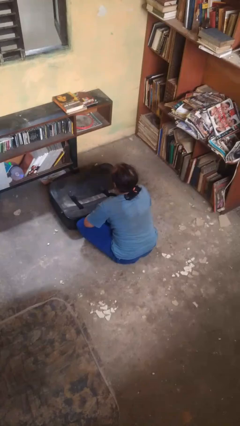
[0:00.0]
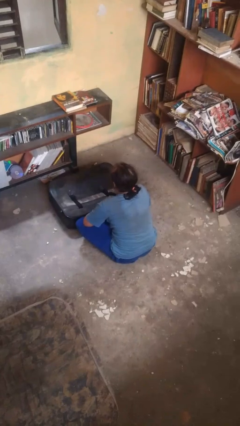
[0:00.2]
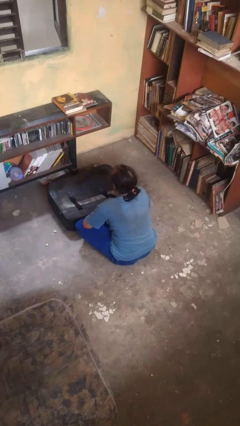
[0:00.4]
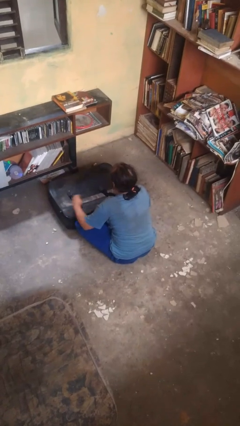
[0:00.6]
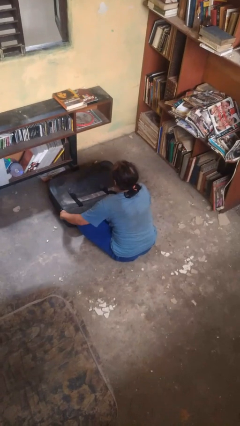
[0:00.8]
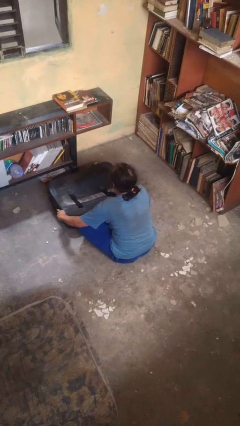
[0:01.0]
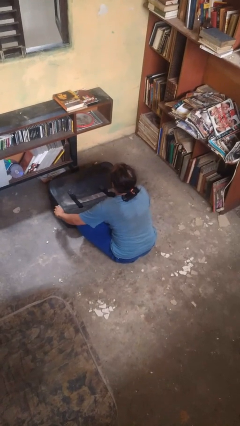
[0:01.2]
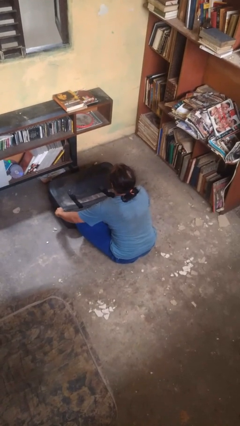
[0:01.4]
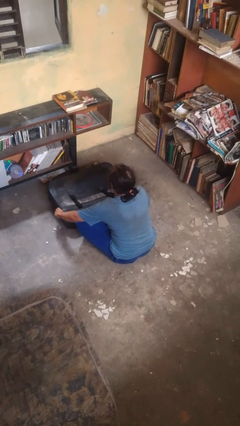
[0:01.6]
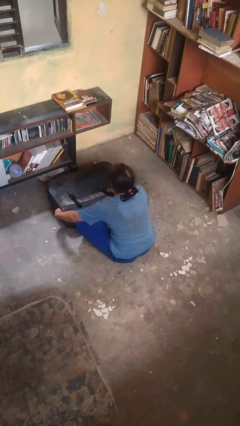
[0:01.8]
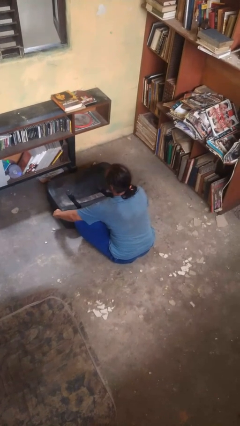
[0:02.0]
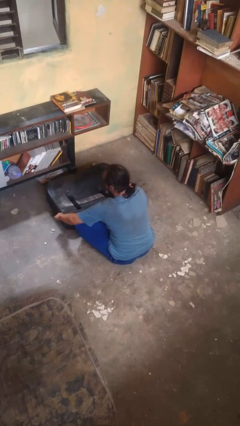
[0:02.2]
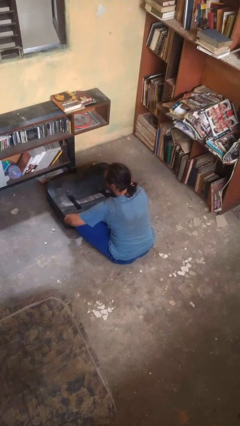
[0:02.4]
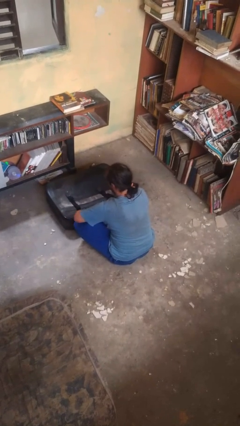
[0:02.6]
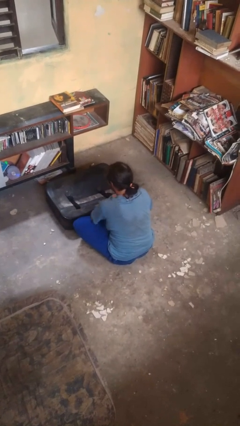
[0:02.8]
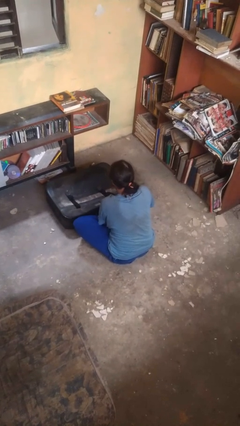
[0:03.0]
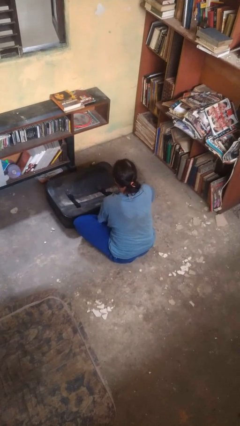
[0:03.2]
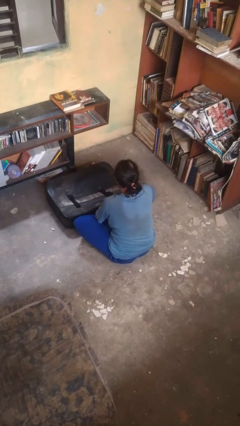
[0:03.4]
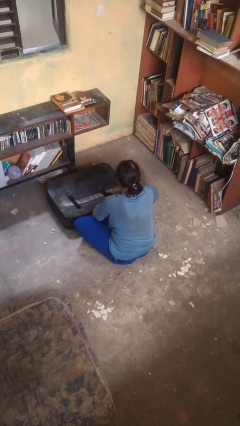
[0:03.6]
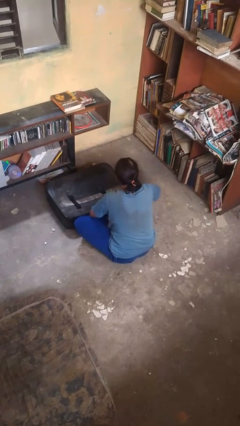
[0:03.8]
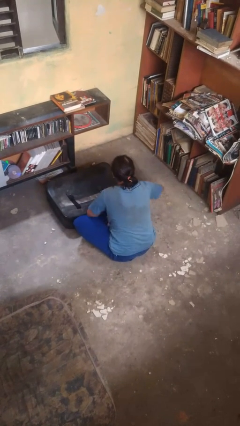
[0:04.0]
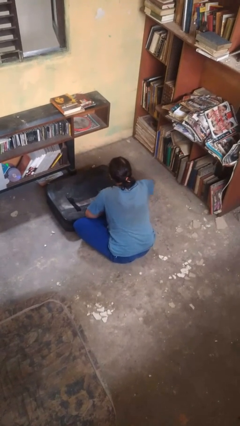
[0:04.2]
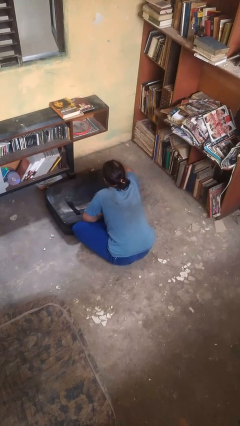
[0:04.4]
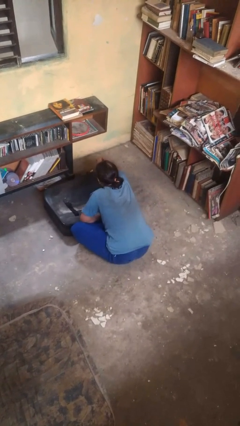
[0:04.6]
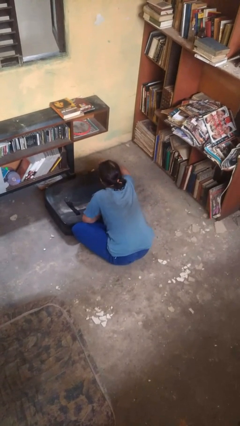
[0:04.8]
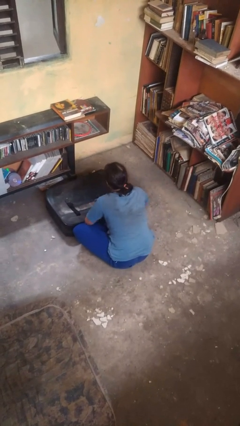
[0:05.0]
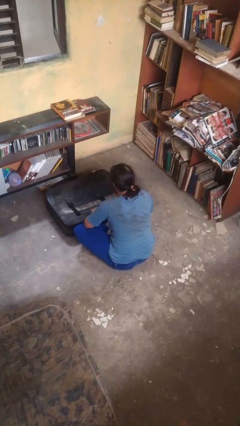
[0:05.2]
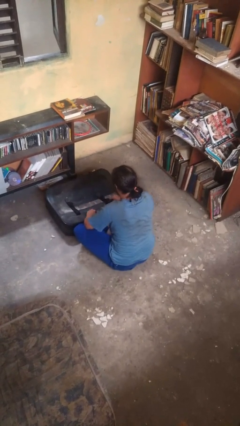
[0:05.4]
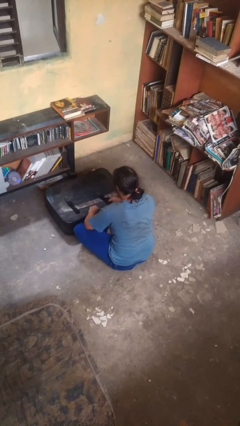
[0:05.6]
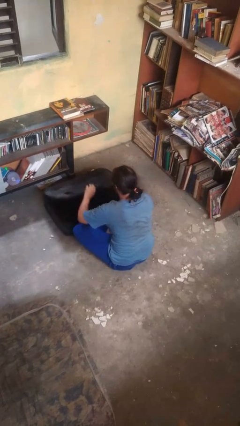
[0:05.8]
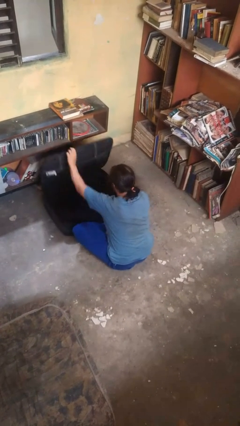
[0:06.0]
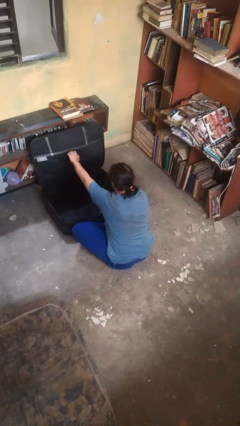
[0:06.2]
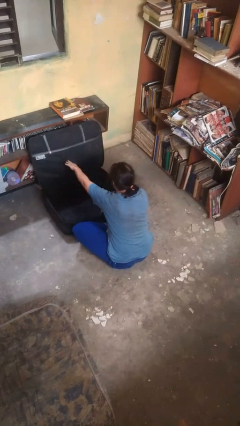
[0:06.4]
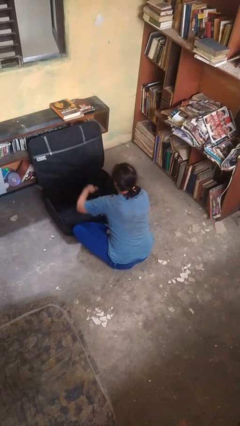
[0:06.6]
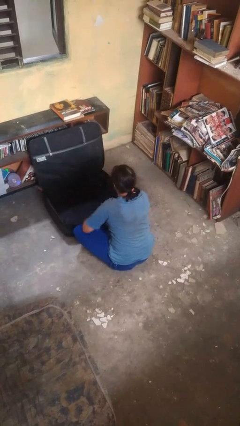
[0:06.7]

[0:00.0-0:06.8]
person opens suitcase

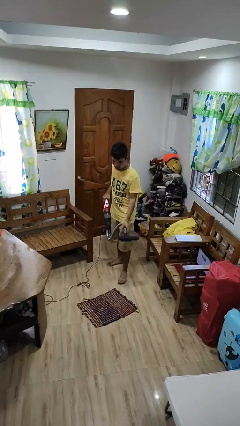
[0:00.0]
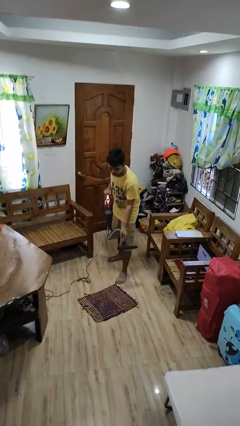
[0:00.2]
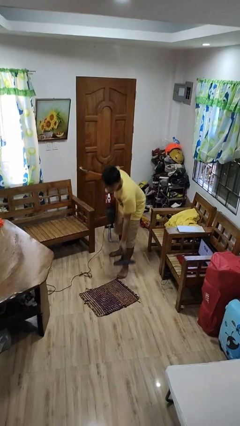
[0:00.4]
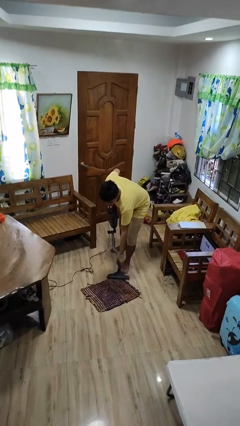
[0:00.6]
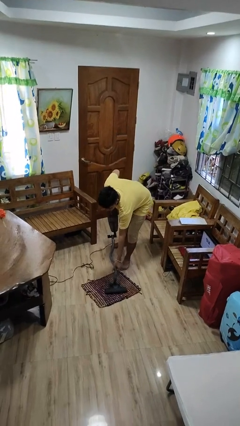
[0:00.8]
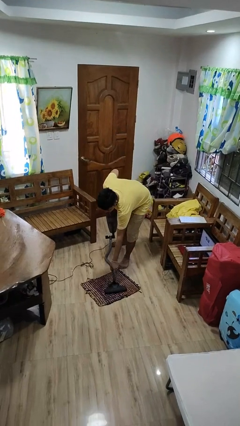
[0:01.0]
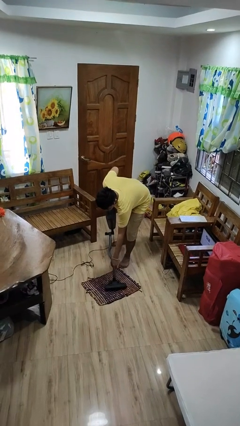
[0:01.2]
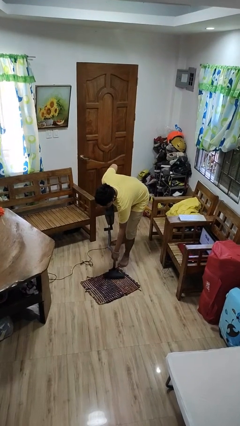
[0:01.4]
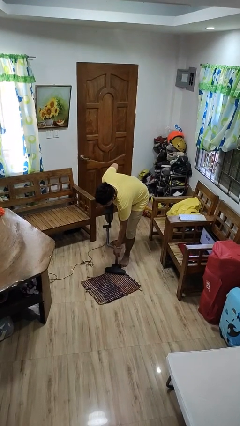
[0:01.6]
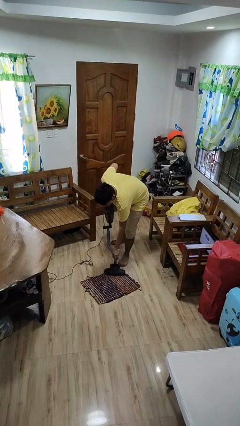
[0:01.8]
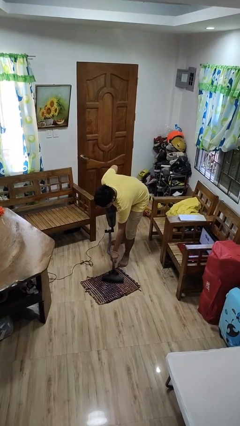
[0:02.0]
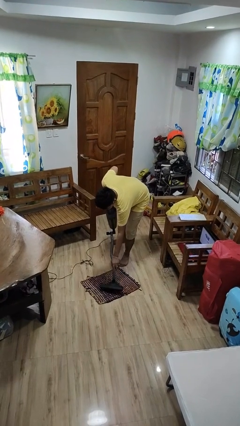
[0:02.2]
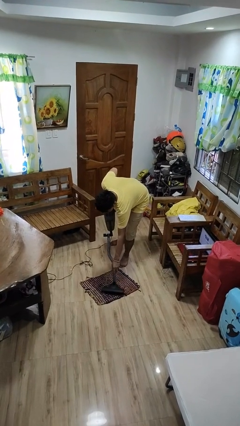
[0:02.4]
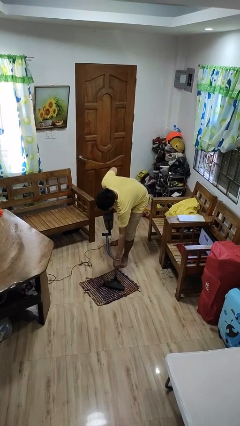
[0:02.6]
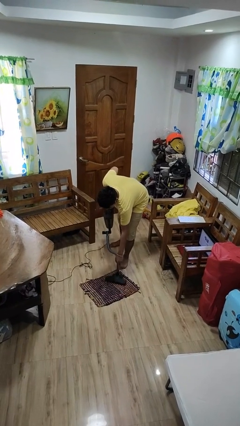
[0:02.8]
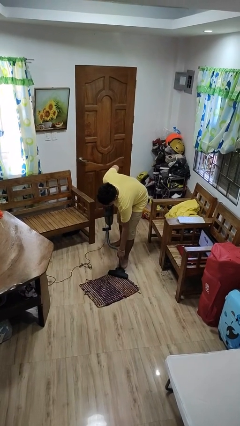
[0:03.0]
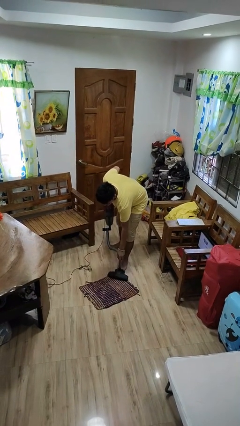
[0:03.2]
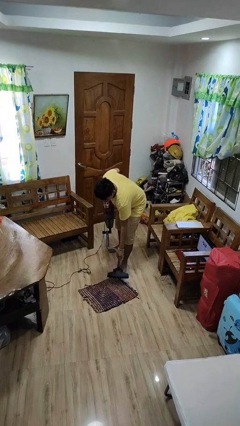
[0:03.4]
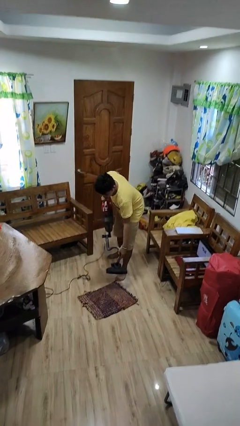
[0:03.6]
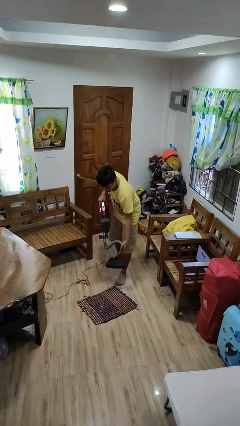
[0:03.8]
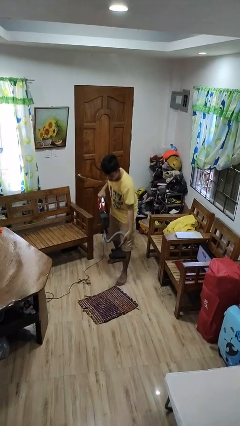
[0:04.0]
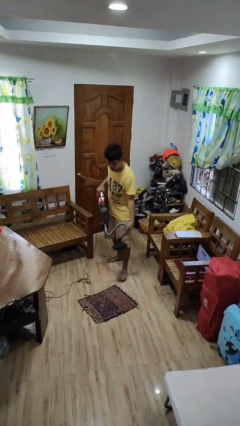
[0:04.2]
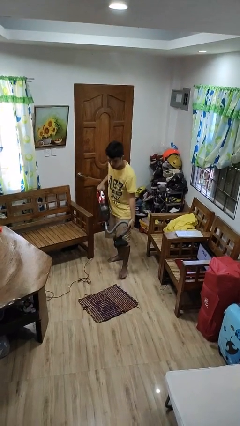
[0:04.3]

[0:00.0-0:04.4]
person vacuums carpet

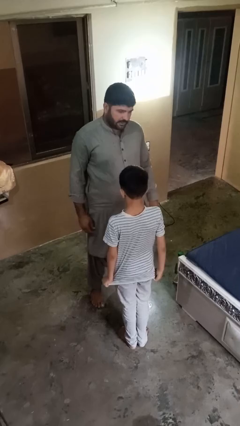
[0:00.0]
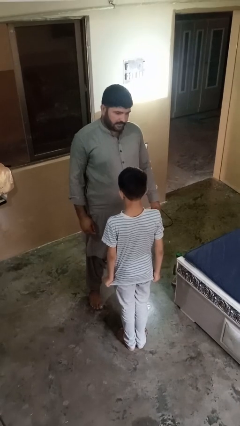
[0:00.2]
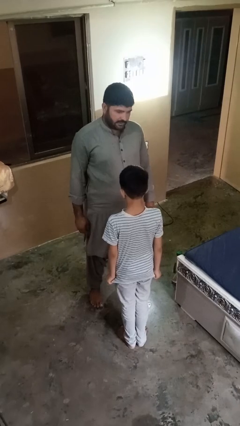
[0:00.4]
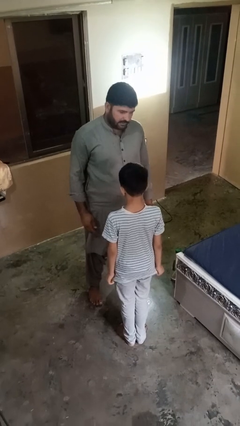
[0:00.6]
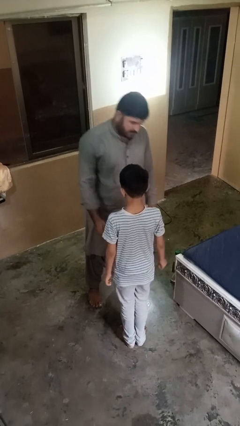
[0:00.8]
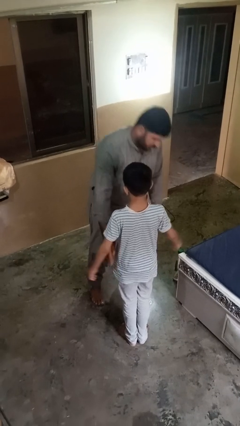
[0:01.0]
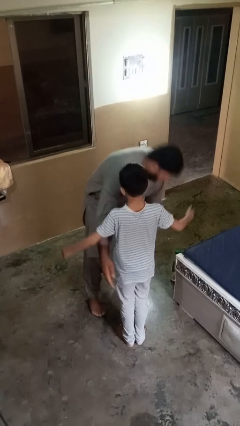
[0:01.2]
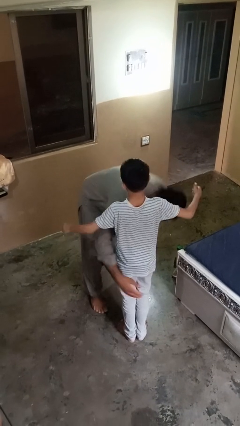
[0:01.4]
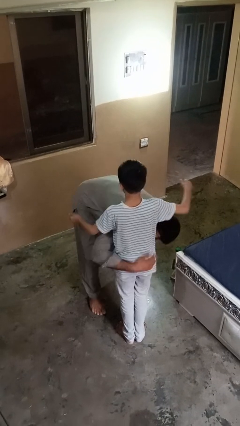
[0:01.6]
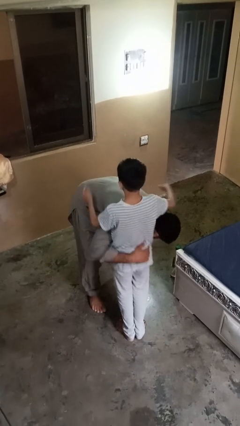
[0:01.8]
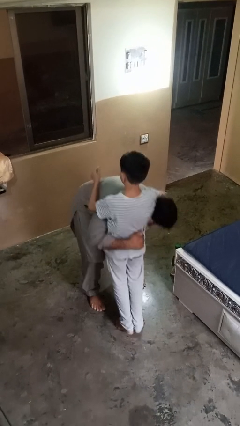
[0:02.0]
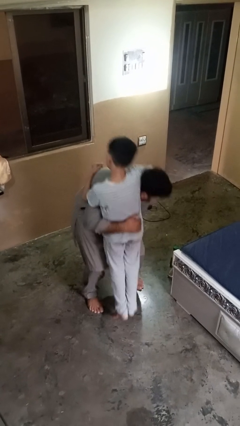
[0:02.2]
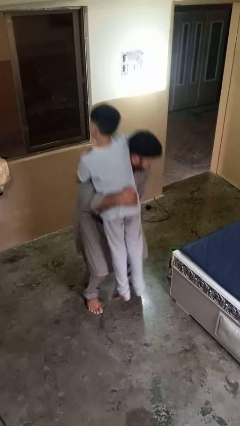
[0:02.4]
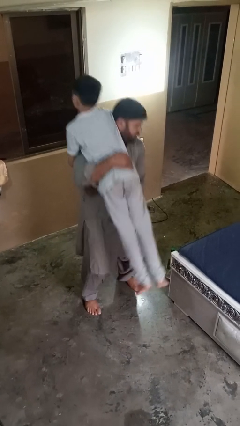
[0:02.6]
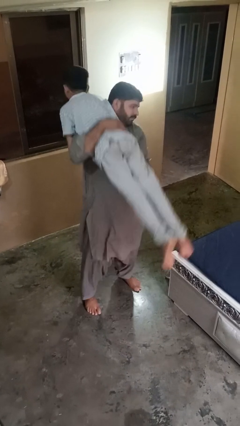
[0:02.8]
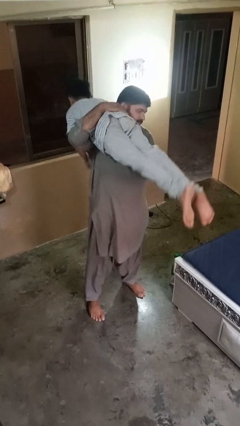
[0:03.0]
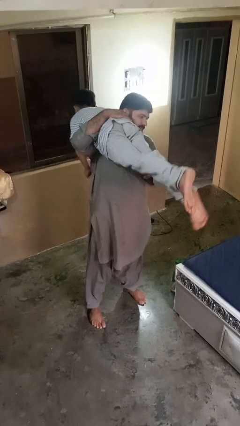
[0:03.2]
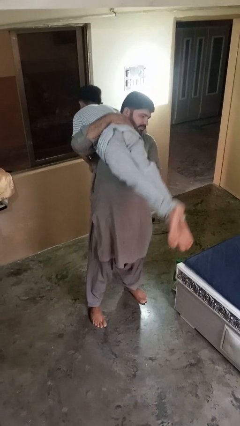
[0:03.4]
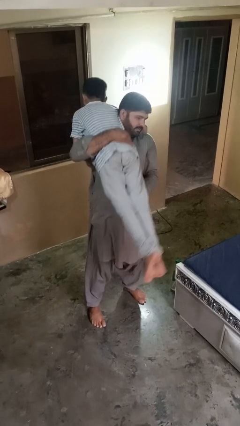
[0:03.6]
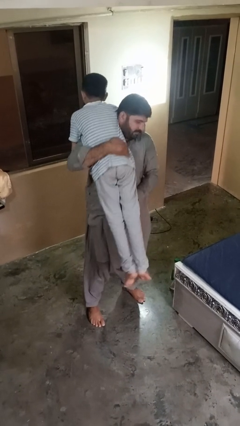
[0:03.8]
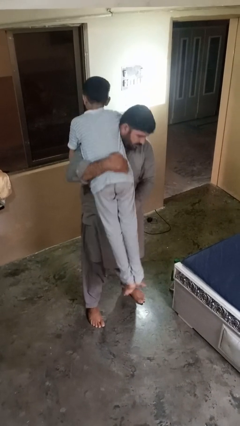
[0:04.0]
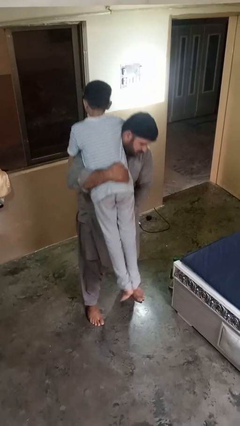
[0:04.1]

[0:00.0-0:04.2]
person carries person on shoulders

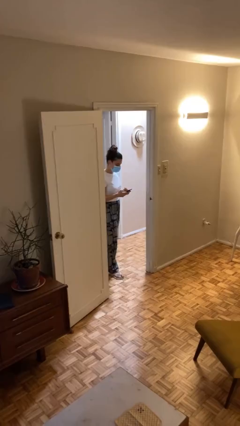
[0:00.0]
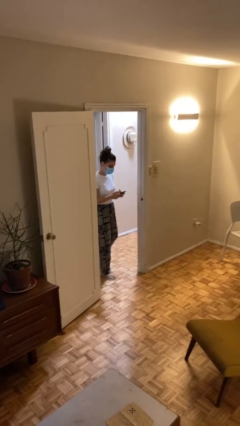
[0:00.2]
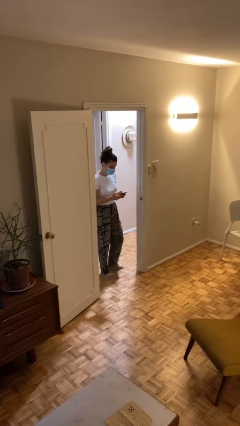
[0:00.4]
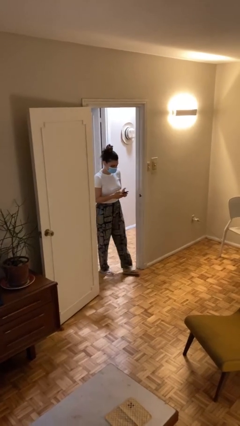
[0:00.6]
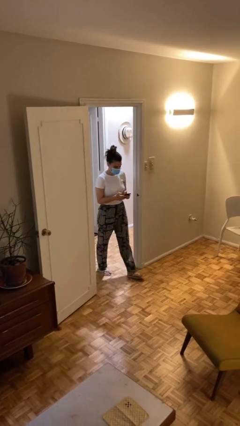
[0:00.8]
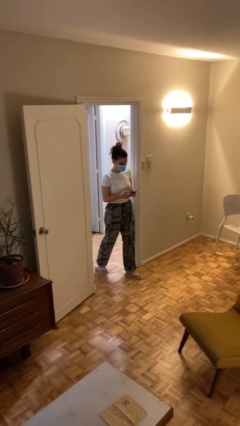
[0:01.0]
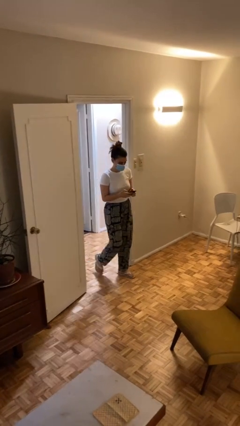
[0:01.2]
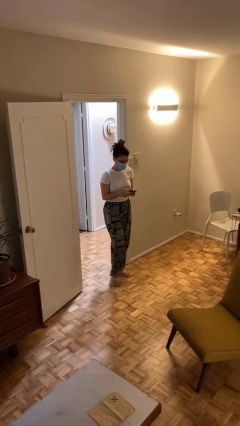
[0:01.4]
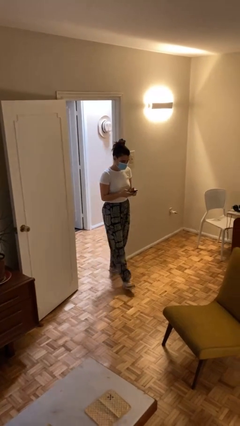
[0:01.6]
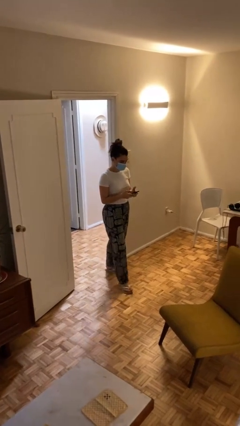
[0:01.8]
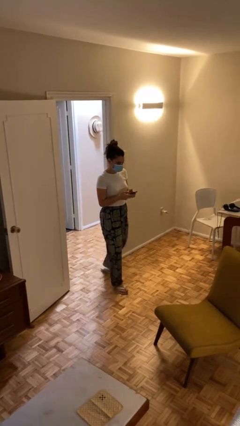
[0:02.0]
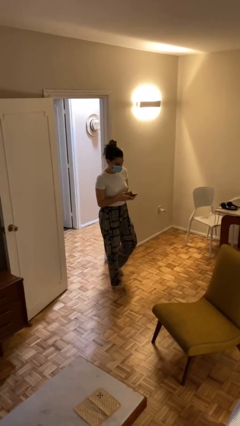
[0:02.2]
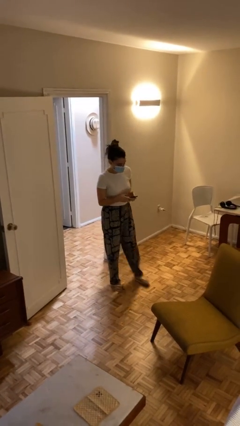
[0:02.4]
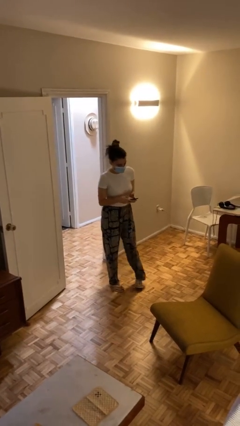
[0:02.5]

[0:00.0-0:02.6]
person enters scene through structure

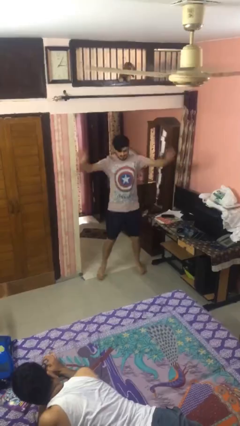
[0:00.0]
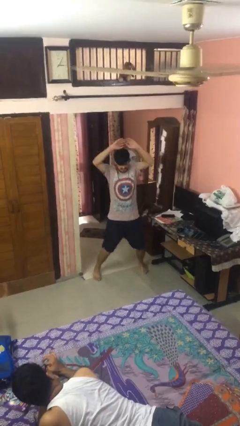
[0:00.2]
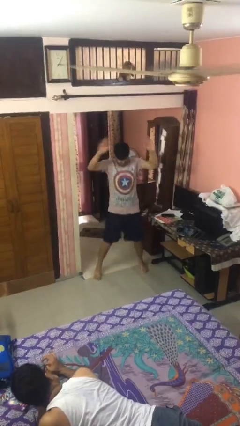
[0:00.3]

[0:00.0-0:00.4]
person exercises with jumping jacks
